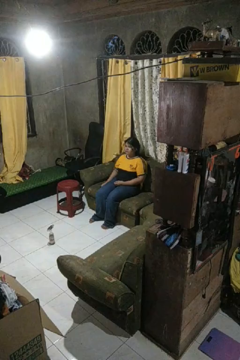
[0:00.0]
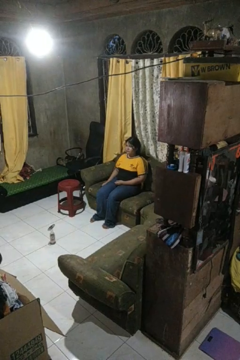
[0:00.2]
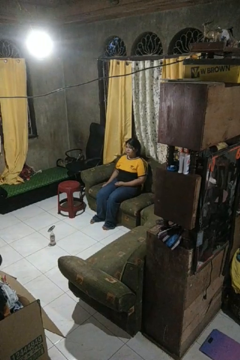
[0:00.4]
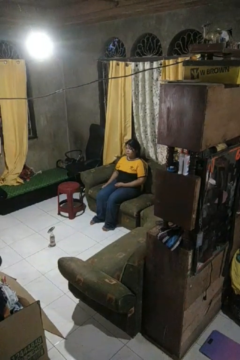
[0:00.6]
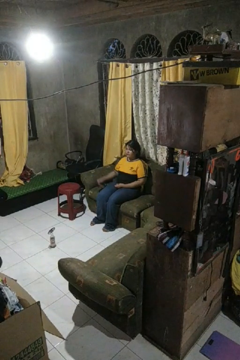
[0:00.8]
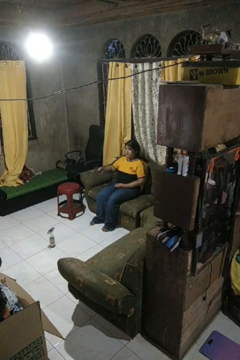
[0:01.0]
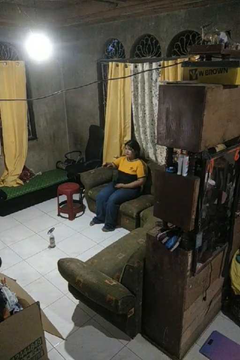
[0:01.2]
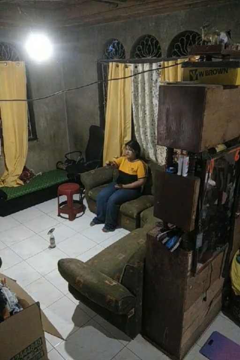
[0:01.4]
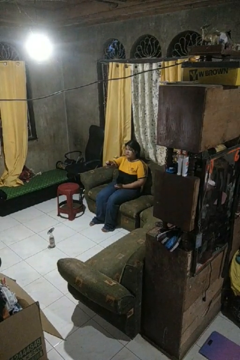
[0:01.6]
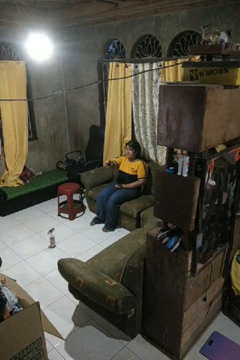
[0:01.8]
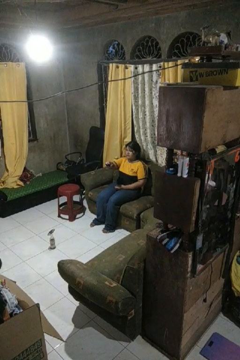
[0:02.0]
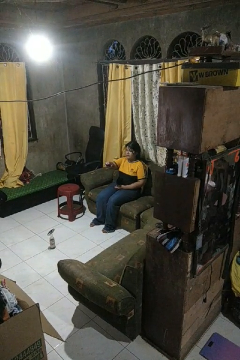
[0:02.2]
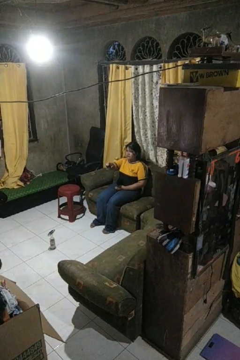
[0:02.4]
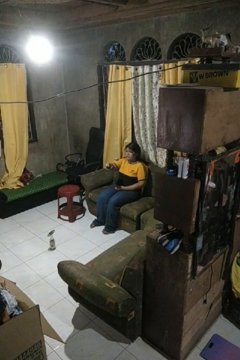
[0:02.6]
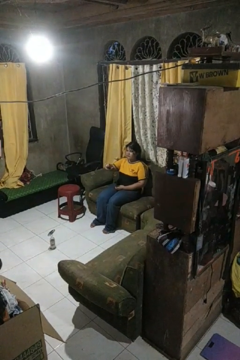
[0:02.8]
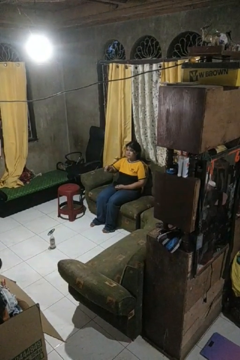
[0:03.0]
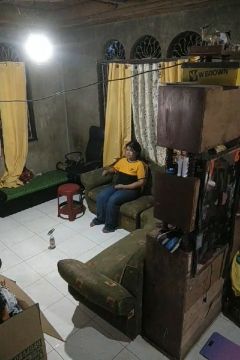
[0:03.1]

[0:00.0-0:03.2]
person uses television remote

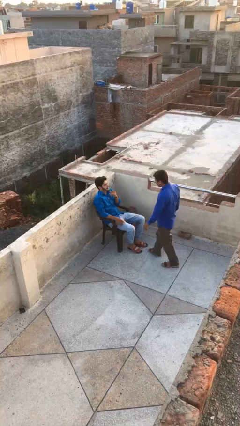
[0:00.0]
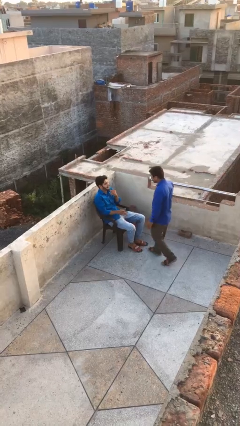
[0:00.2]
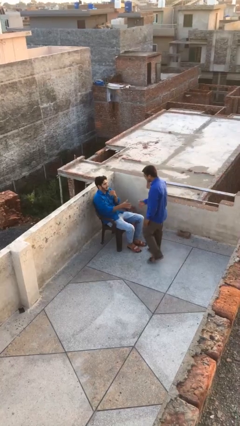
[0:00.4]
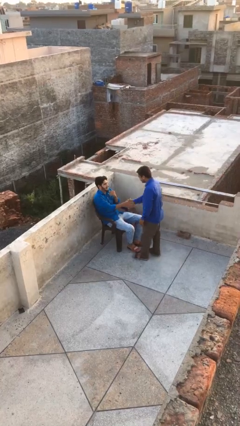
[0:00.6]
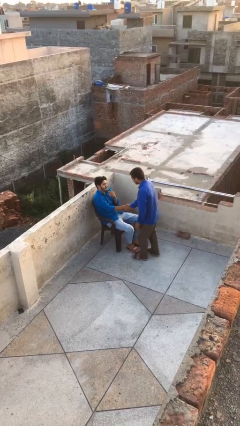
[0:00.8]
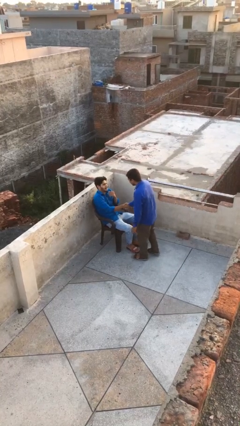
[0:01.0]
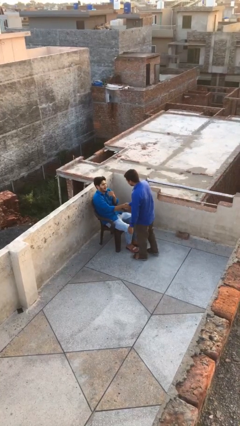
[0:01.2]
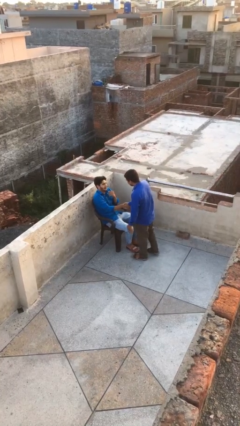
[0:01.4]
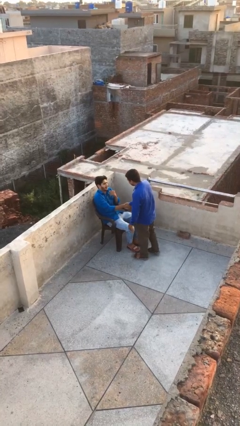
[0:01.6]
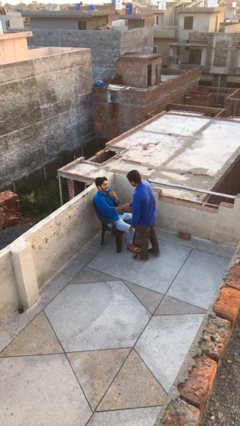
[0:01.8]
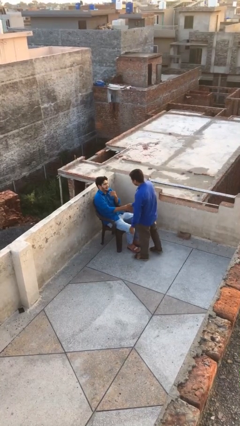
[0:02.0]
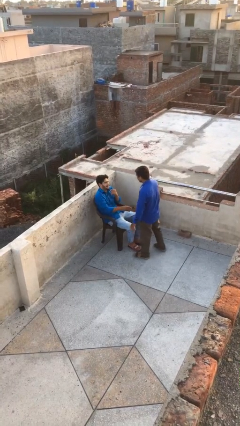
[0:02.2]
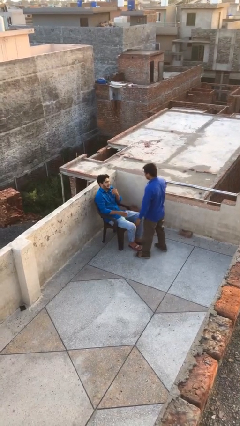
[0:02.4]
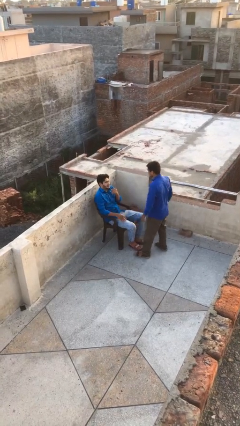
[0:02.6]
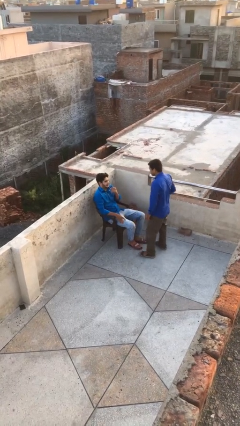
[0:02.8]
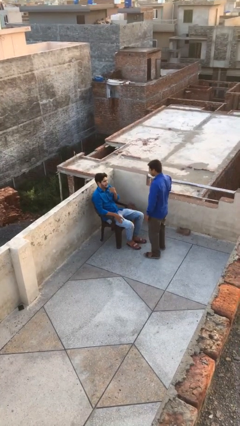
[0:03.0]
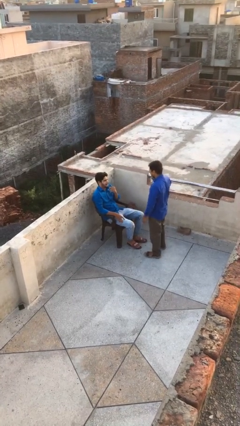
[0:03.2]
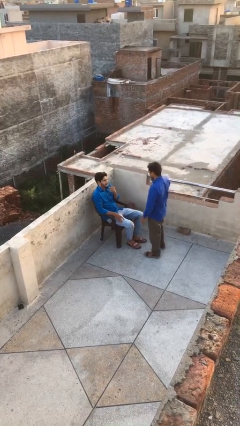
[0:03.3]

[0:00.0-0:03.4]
person shakes hand

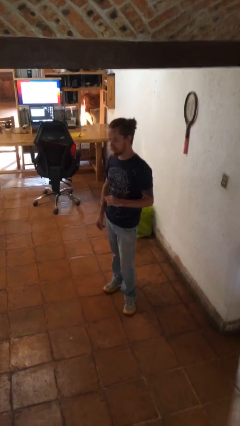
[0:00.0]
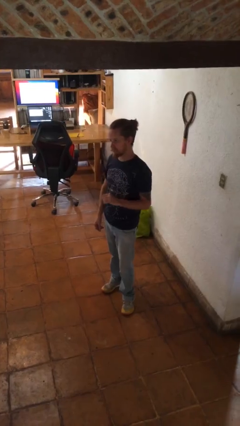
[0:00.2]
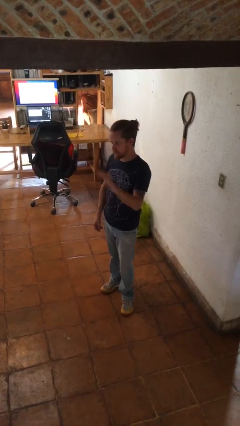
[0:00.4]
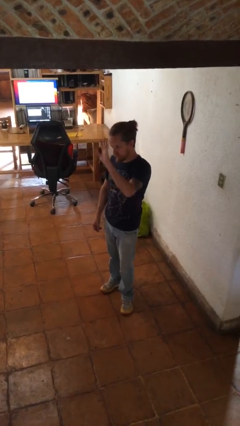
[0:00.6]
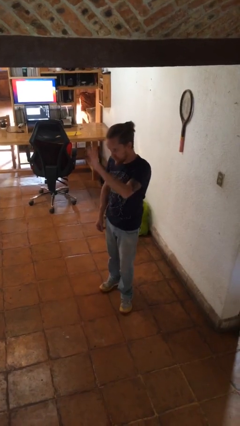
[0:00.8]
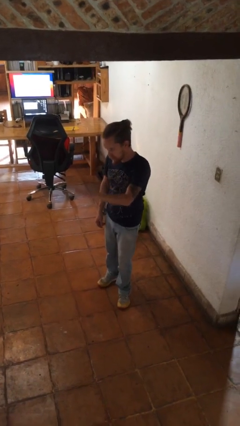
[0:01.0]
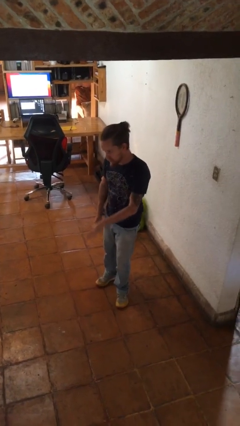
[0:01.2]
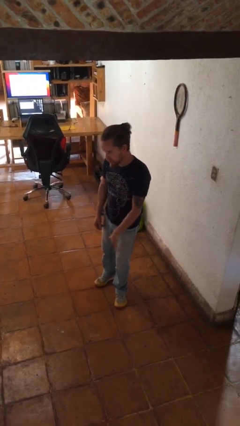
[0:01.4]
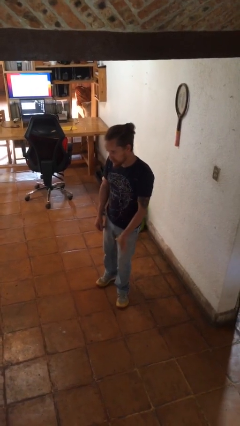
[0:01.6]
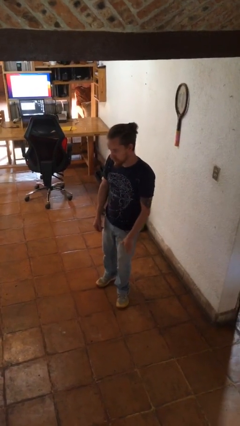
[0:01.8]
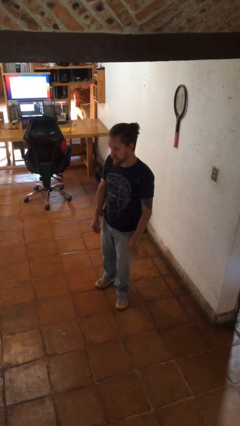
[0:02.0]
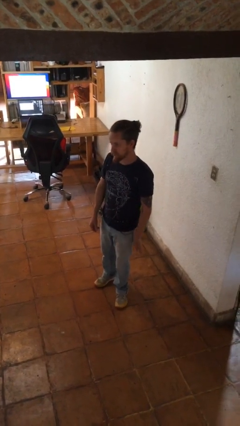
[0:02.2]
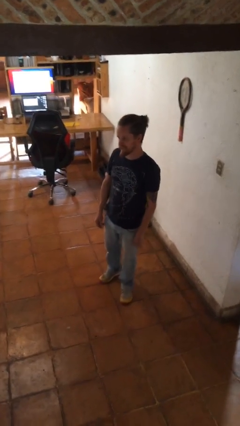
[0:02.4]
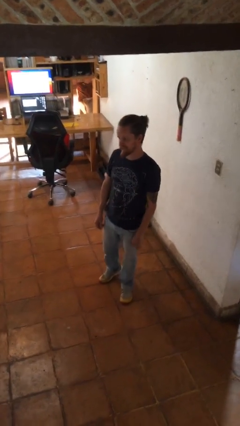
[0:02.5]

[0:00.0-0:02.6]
person gestures swipe down

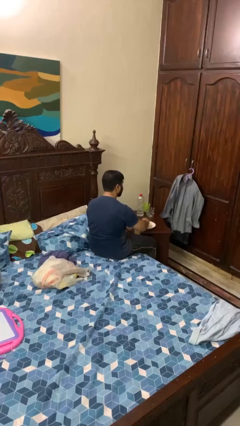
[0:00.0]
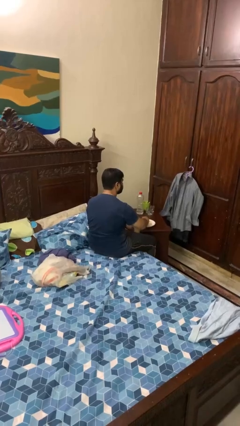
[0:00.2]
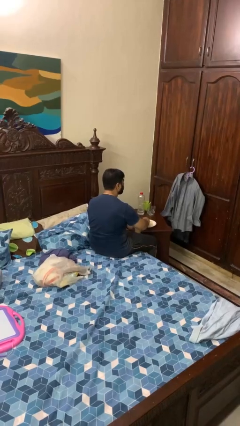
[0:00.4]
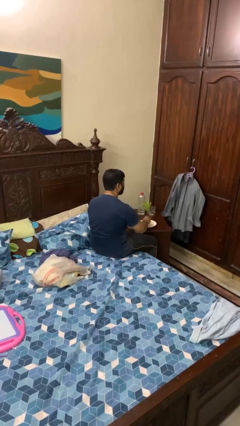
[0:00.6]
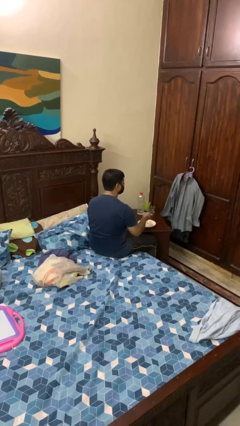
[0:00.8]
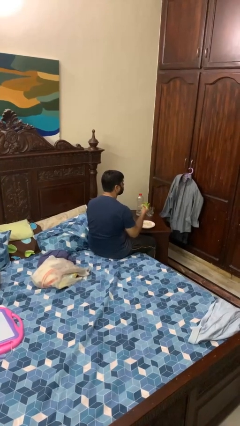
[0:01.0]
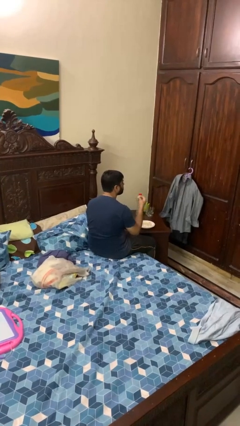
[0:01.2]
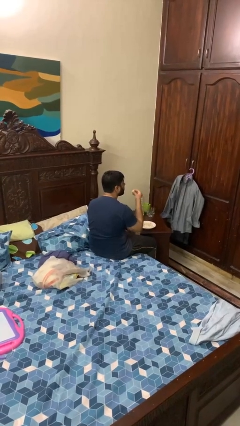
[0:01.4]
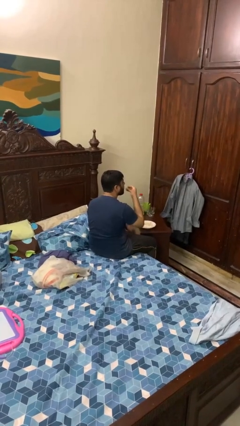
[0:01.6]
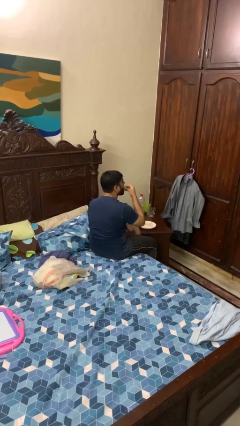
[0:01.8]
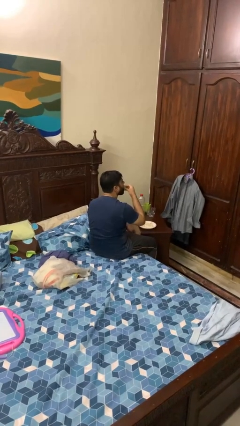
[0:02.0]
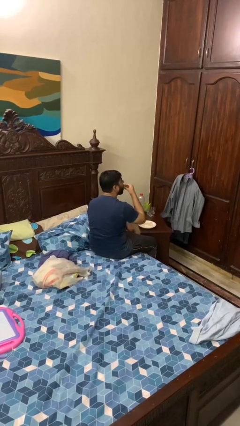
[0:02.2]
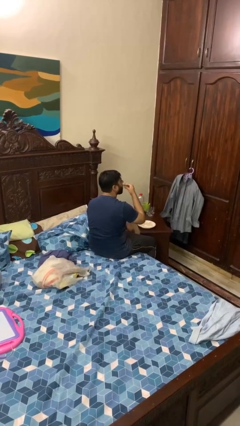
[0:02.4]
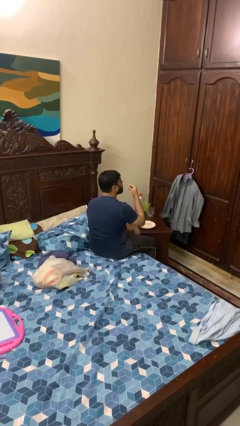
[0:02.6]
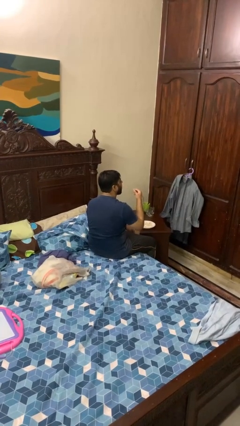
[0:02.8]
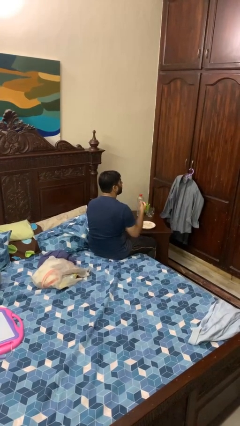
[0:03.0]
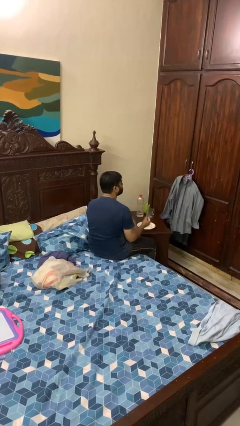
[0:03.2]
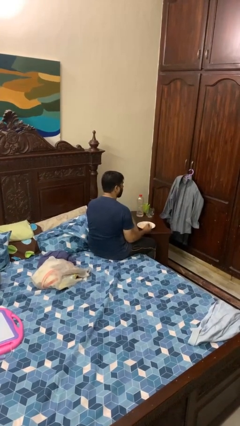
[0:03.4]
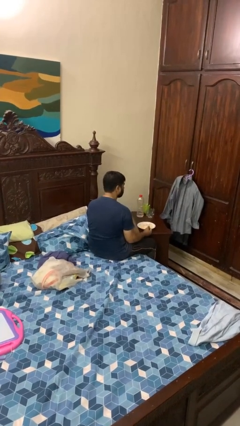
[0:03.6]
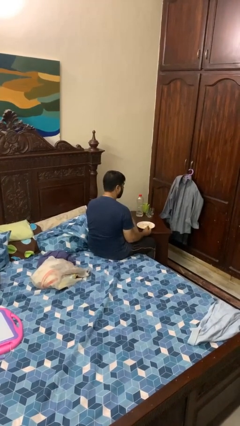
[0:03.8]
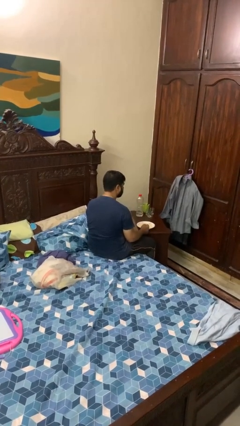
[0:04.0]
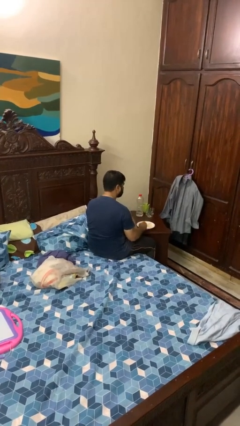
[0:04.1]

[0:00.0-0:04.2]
person eats with hands

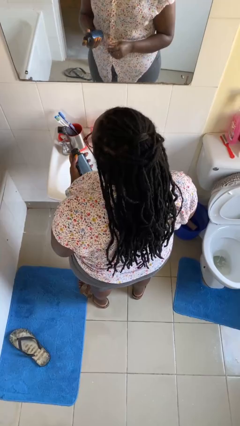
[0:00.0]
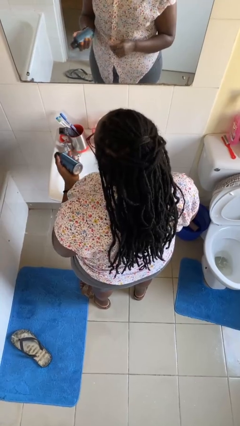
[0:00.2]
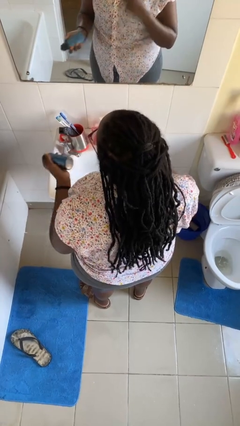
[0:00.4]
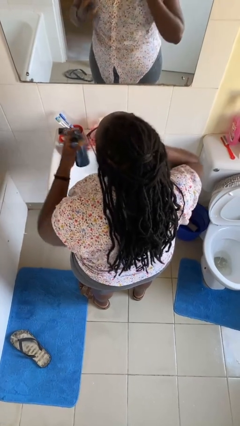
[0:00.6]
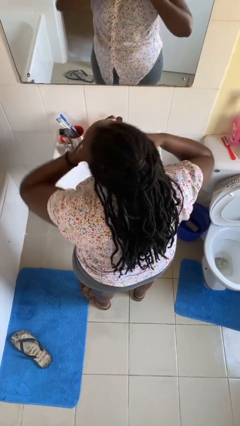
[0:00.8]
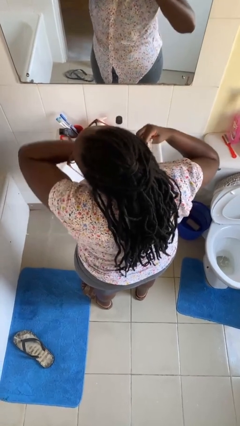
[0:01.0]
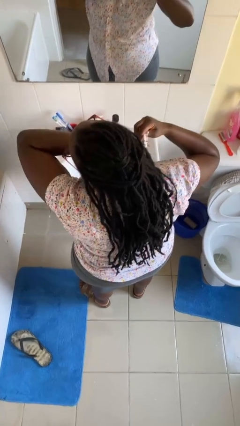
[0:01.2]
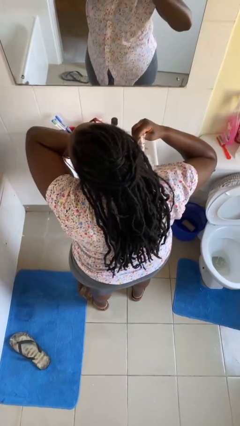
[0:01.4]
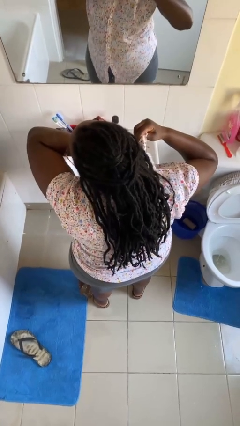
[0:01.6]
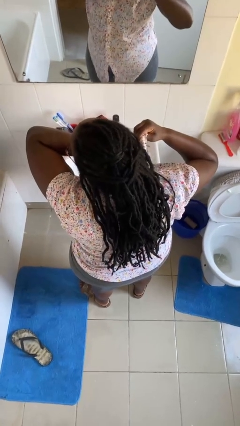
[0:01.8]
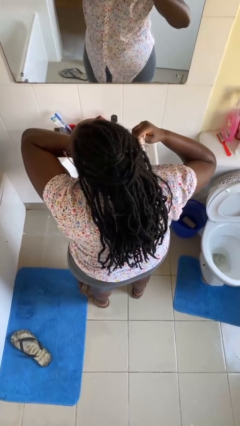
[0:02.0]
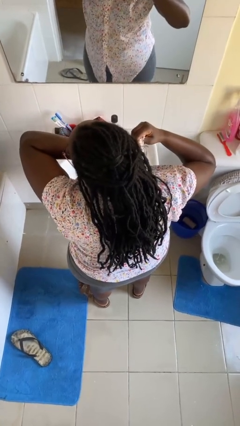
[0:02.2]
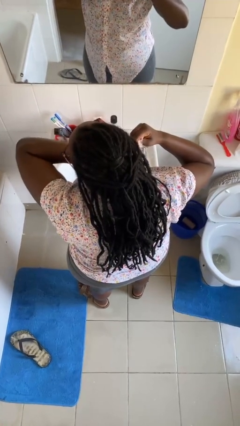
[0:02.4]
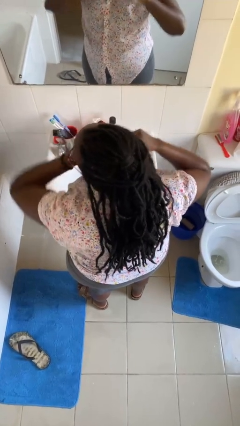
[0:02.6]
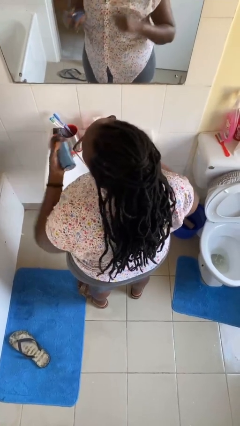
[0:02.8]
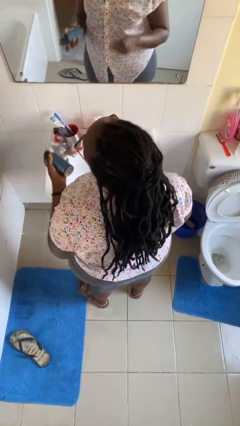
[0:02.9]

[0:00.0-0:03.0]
person applies deodorant

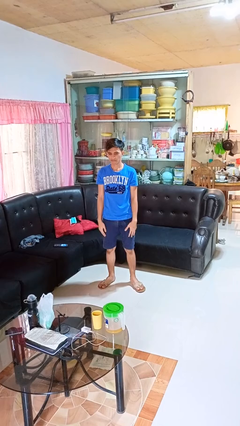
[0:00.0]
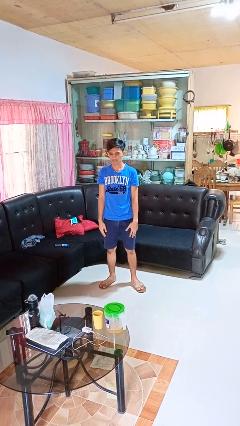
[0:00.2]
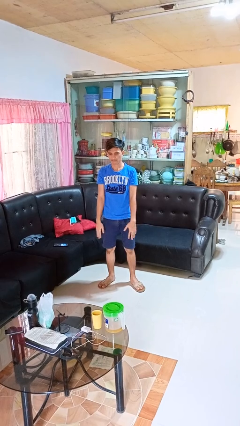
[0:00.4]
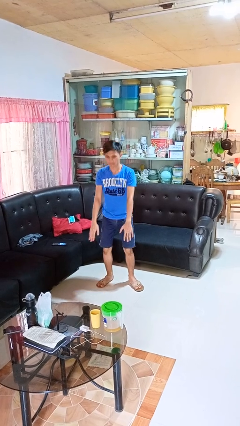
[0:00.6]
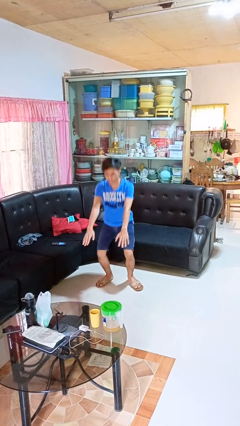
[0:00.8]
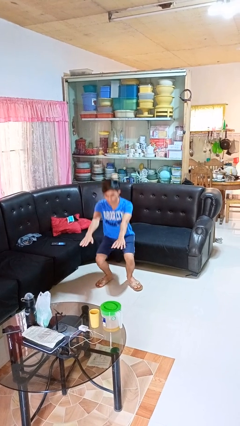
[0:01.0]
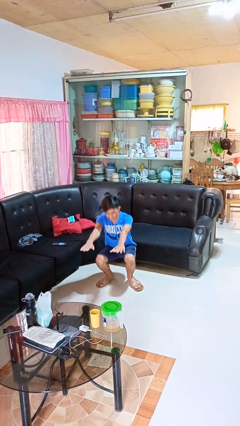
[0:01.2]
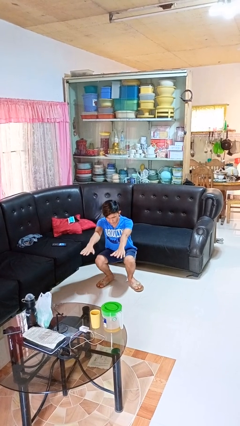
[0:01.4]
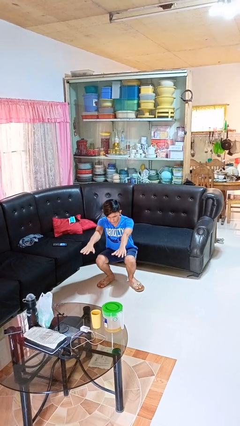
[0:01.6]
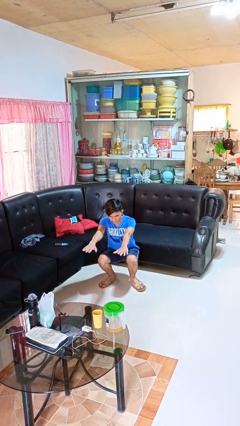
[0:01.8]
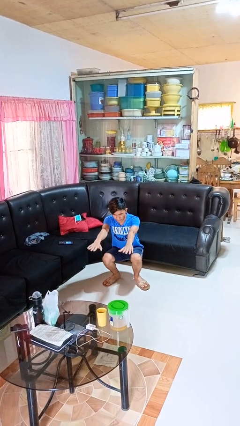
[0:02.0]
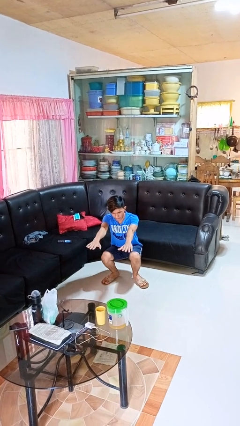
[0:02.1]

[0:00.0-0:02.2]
person squats
